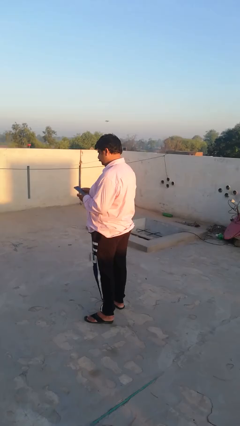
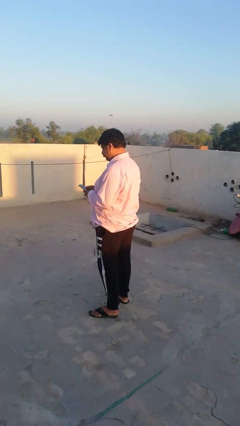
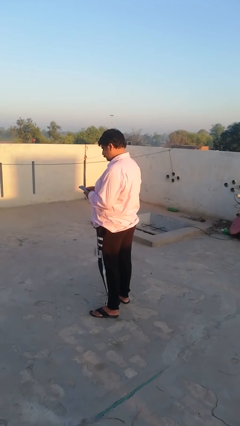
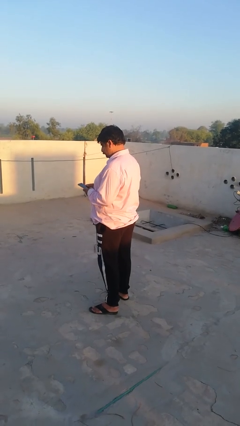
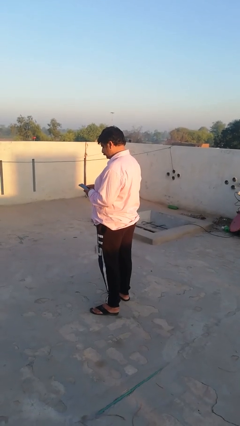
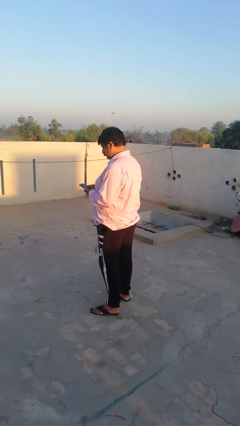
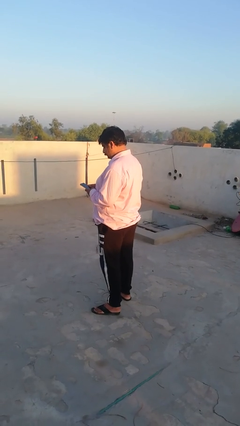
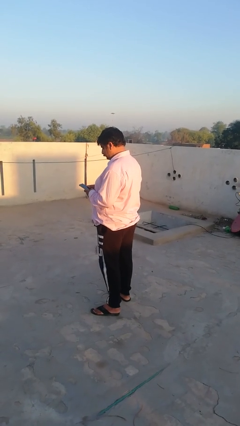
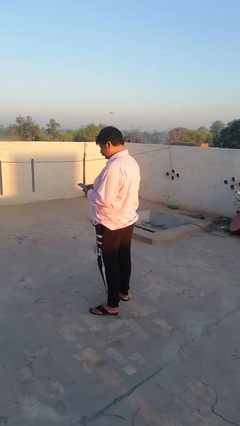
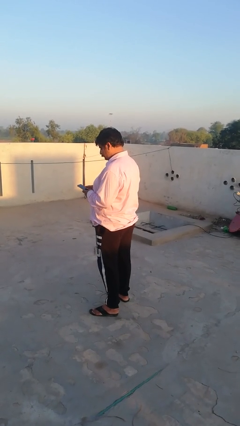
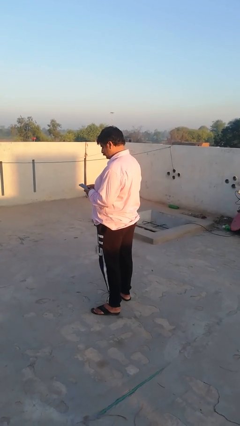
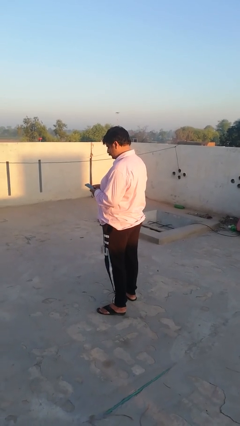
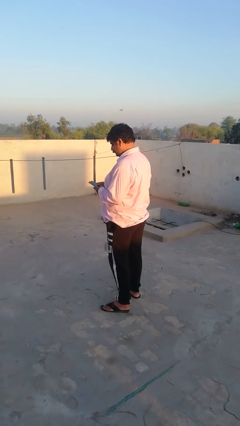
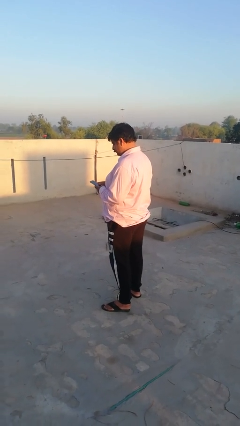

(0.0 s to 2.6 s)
person takes phone from pocket

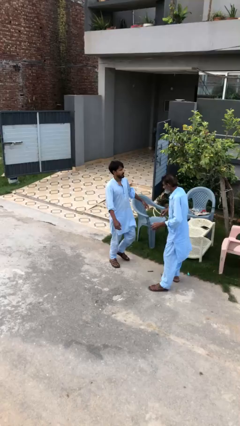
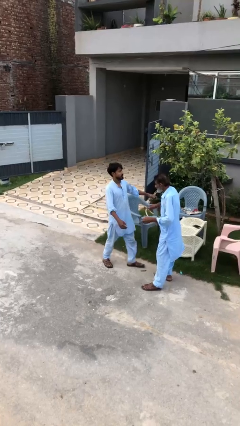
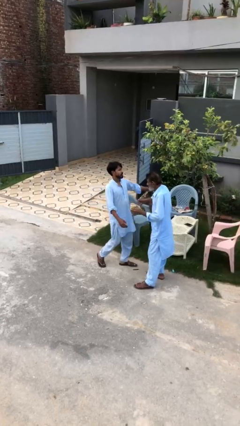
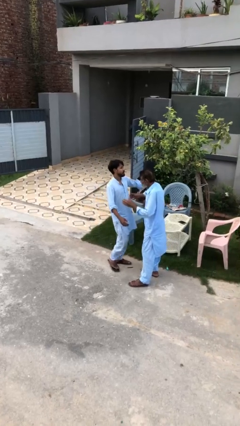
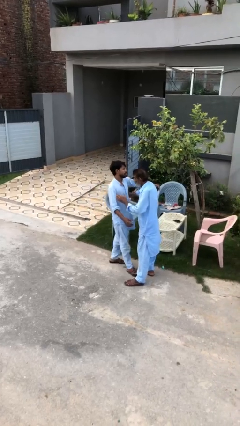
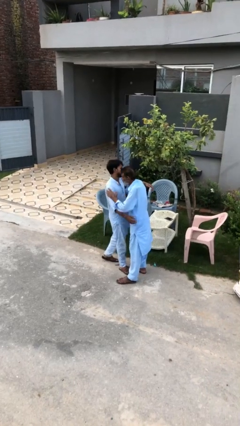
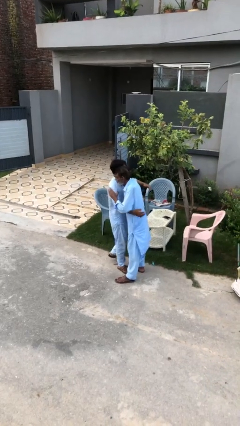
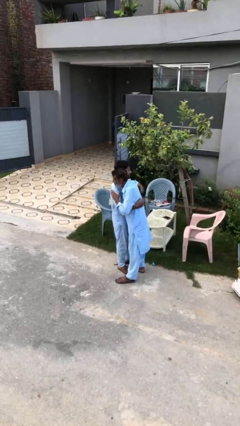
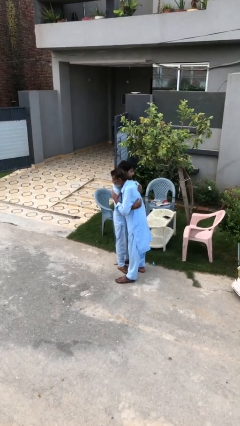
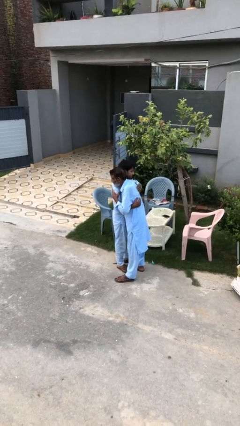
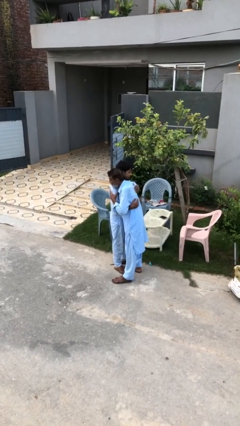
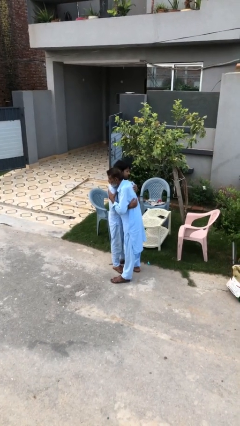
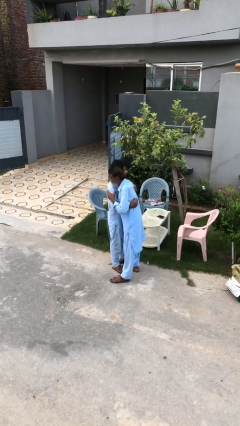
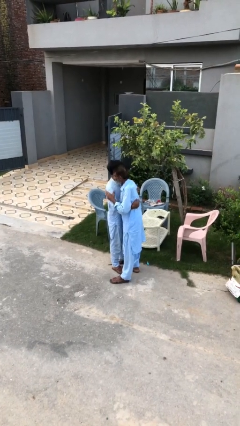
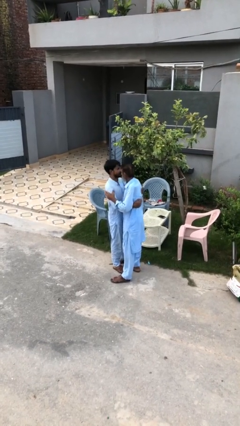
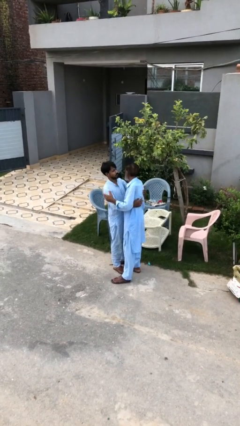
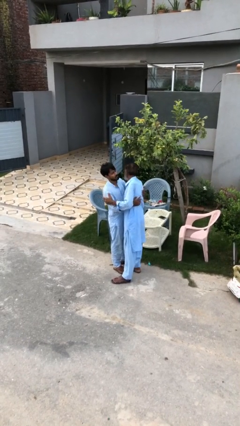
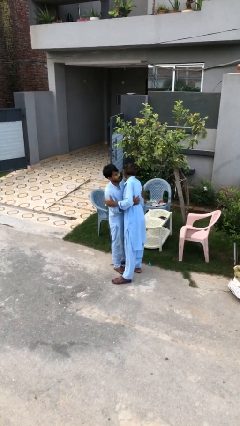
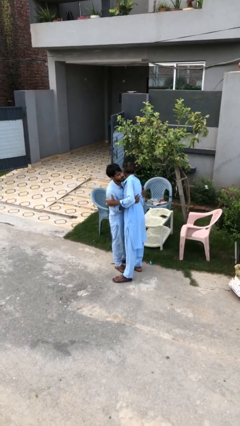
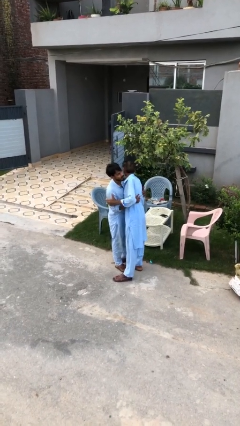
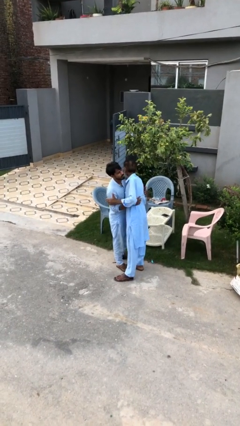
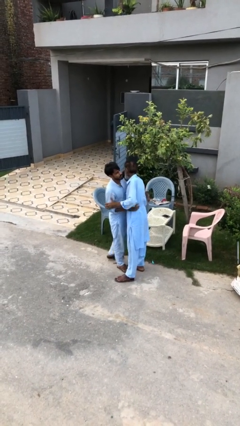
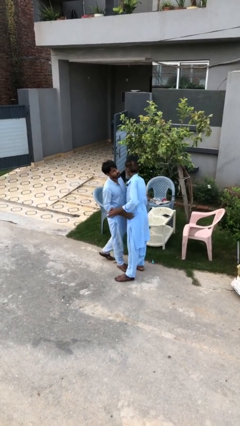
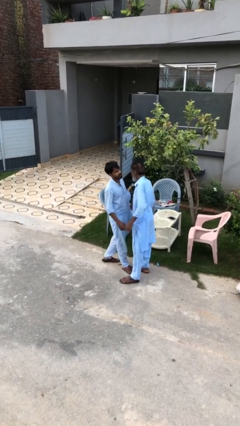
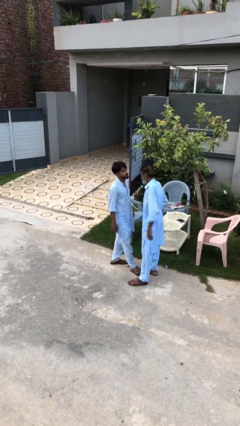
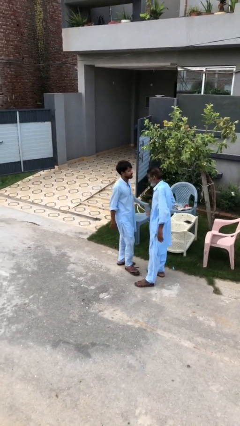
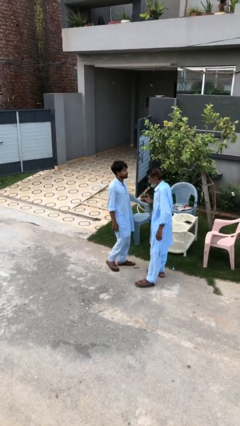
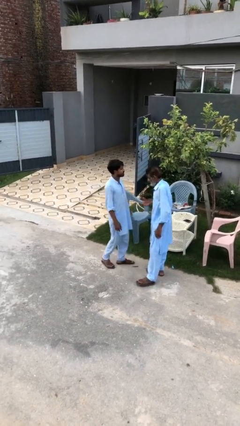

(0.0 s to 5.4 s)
person embraces person

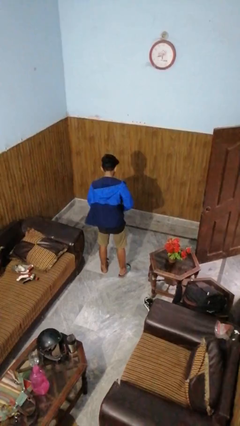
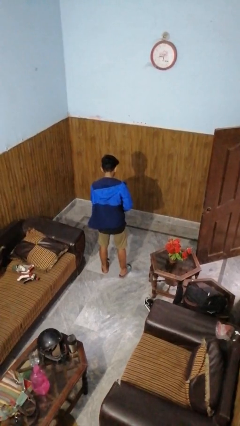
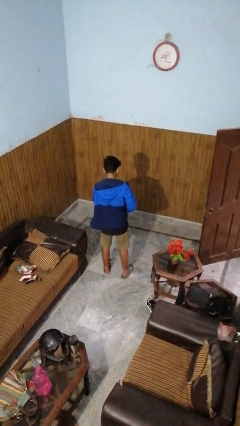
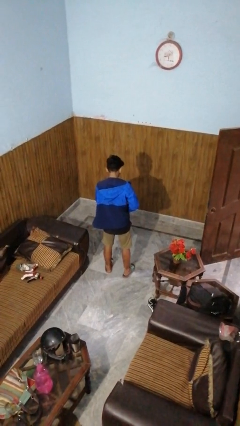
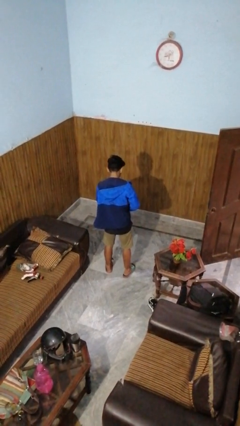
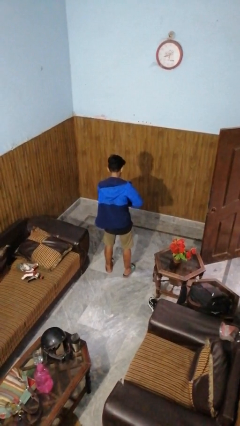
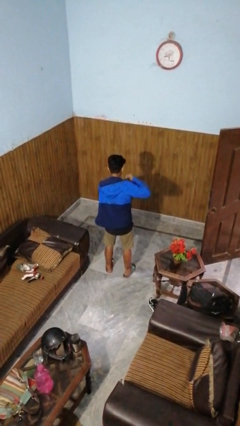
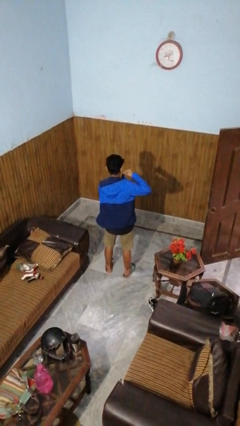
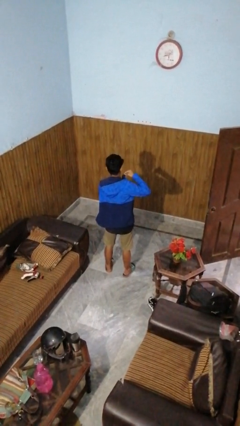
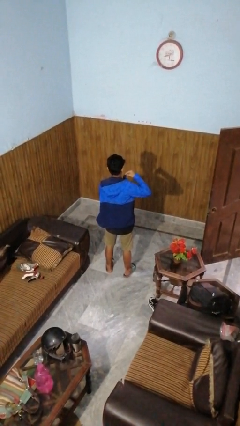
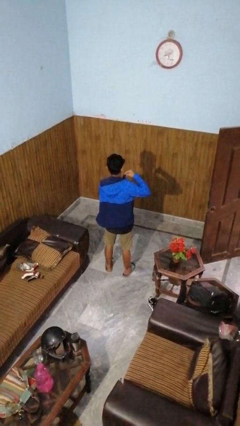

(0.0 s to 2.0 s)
person zips up jacket

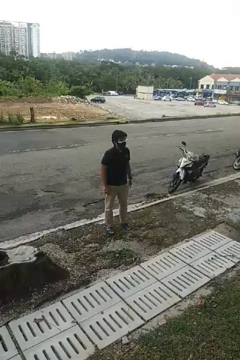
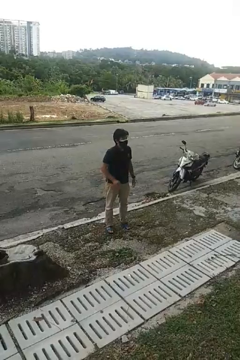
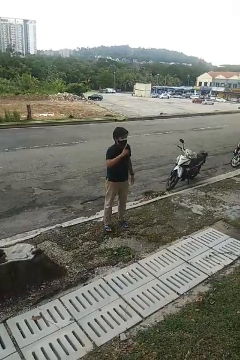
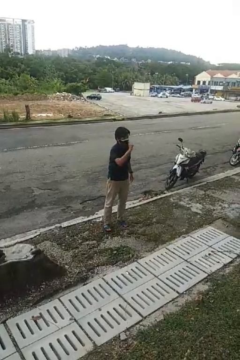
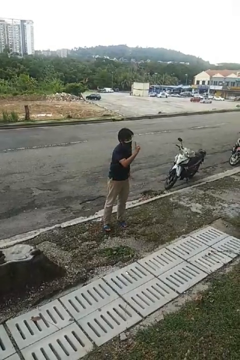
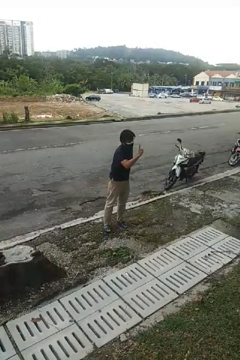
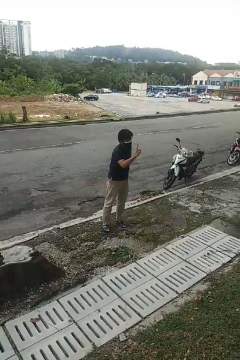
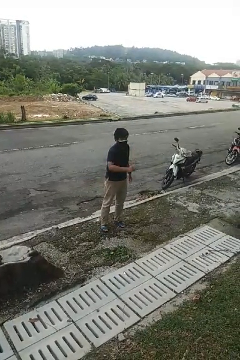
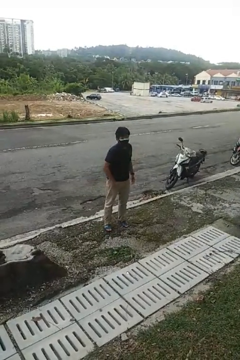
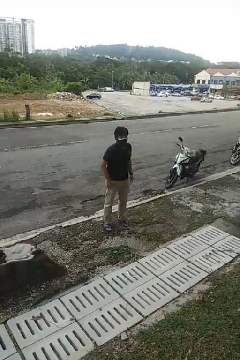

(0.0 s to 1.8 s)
person gestures number one

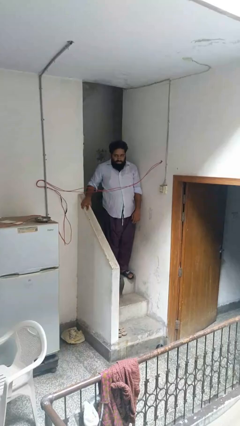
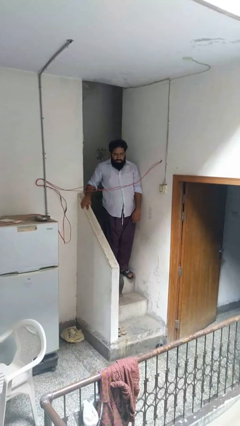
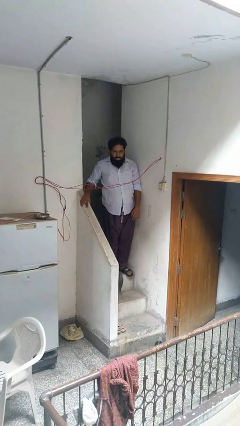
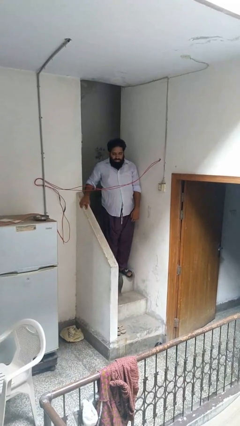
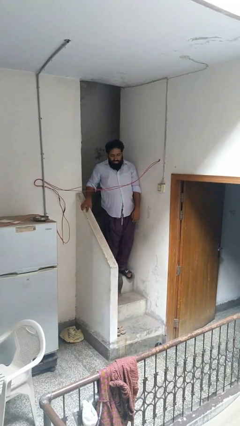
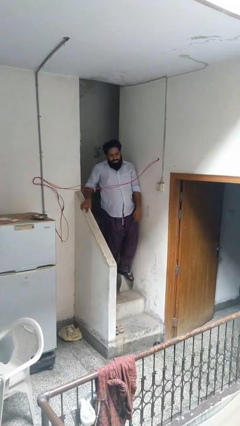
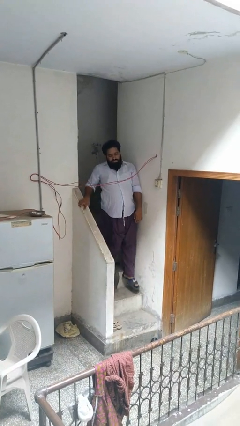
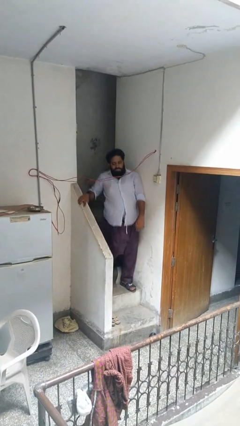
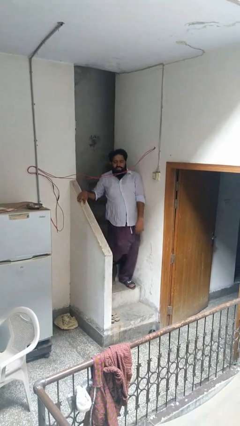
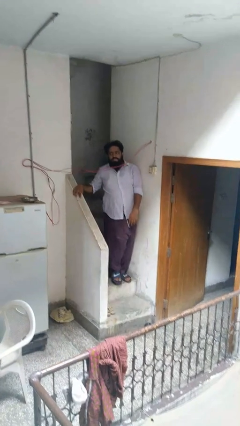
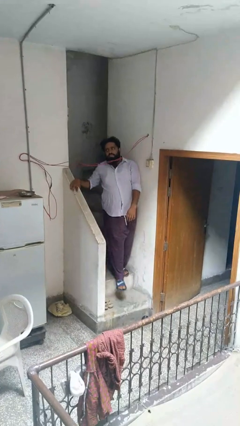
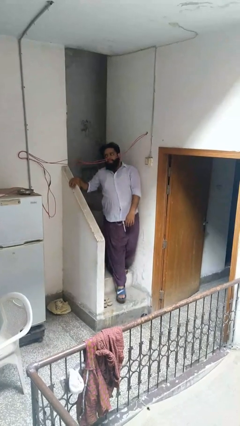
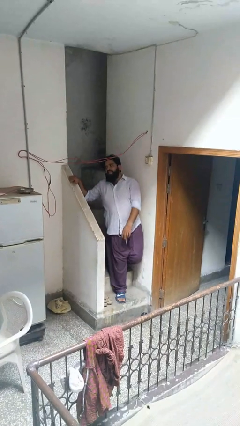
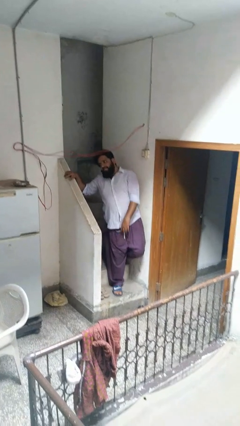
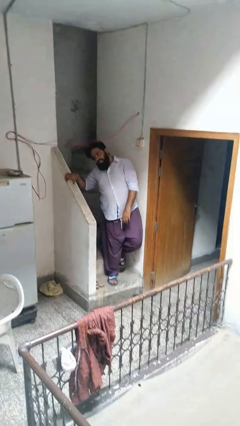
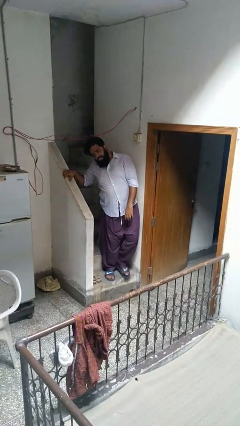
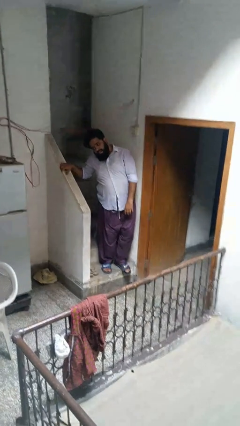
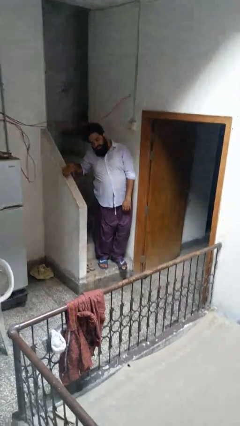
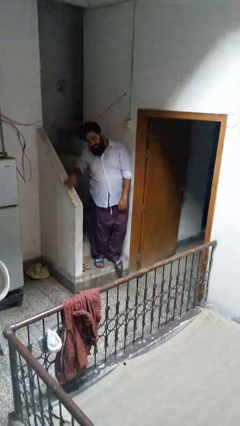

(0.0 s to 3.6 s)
person climbs down stairs

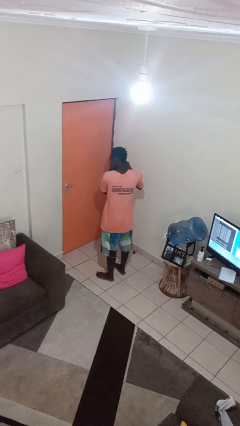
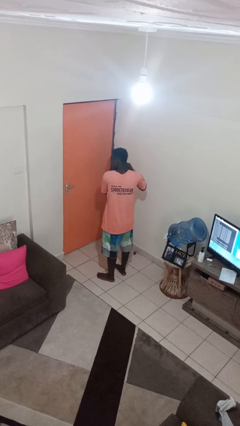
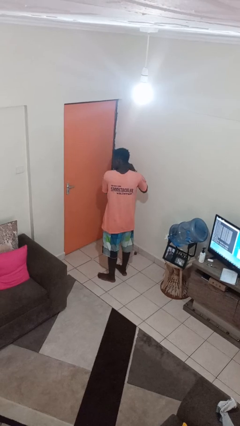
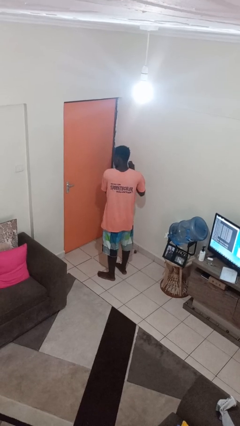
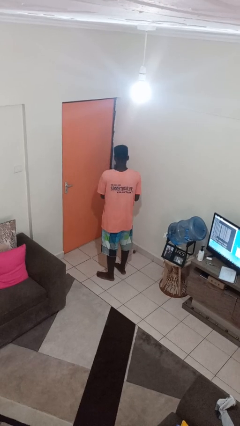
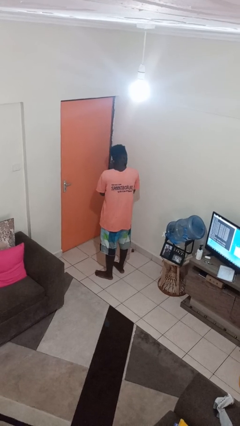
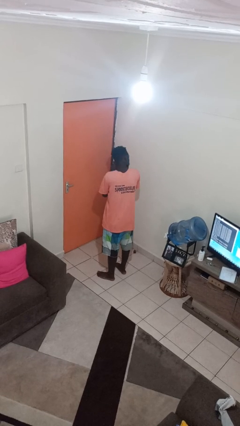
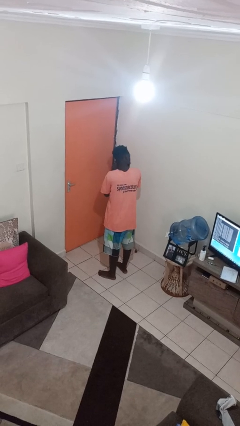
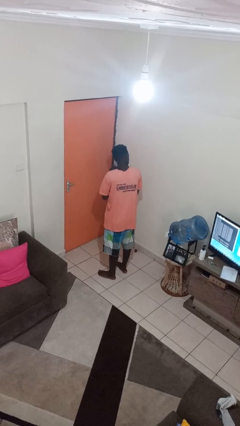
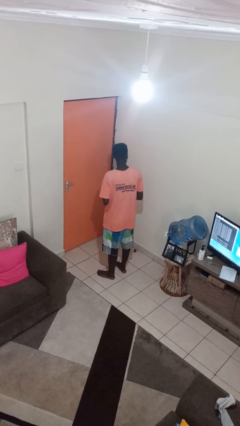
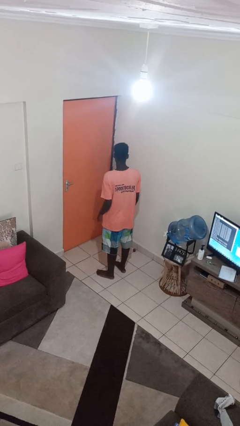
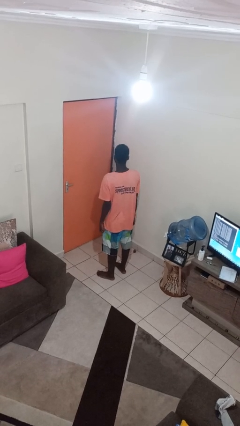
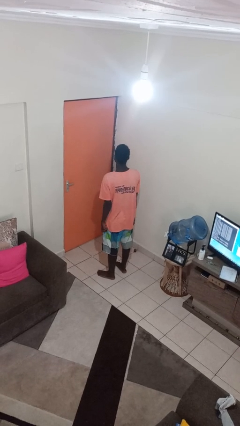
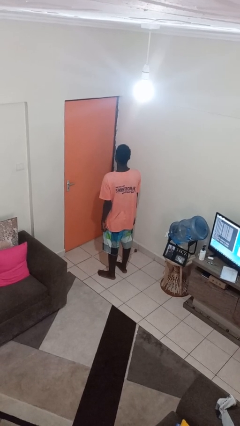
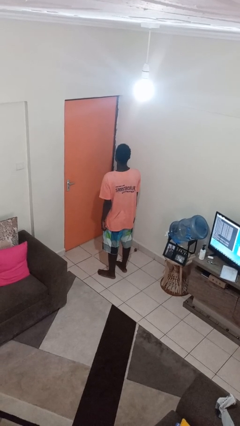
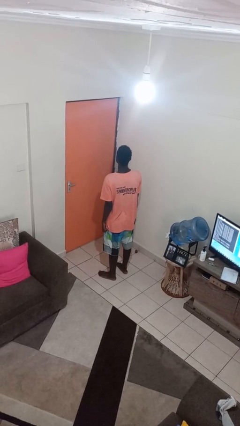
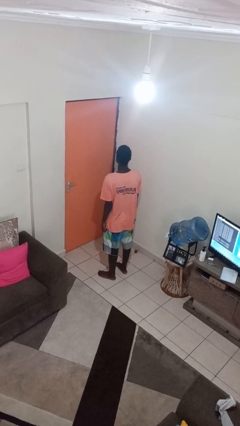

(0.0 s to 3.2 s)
person takes off earrings
